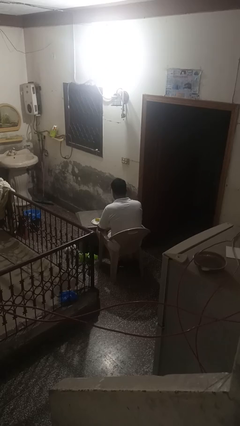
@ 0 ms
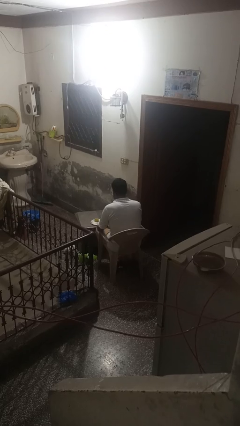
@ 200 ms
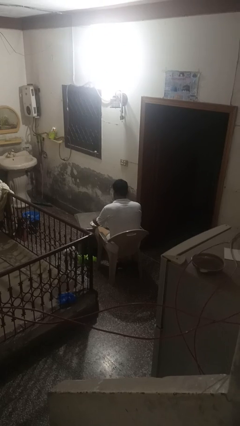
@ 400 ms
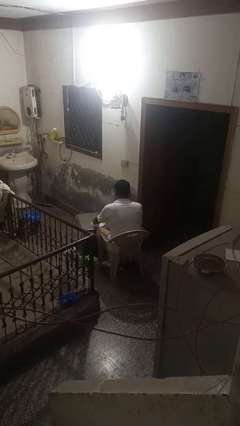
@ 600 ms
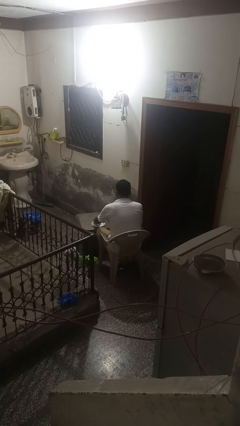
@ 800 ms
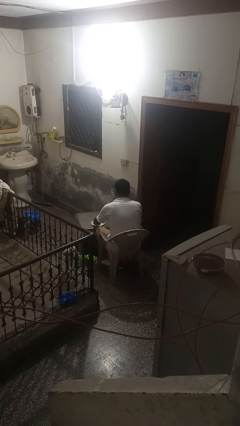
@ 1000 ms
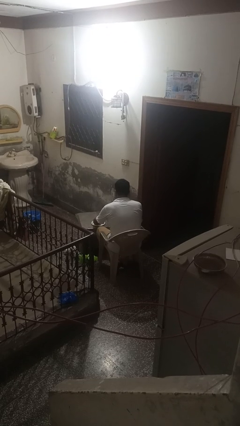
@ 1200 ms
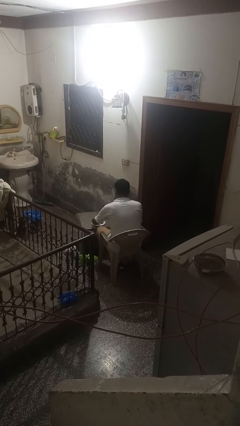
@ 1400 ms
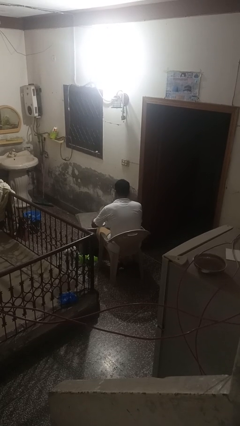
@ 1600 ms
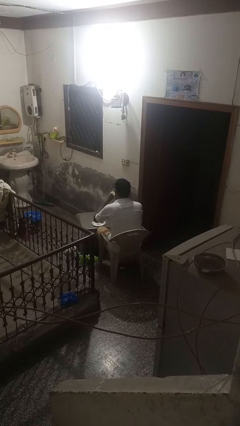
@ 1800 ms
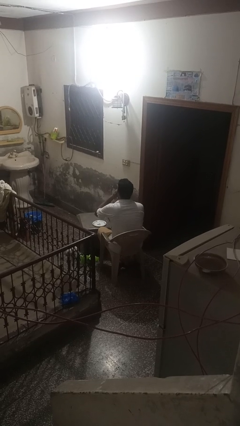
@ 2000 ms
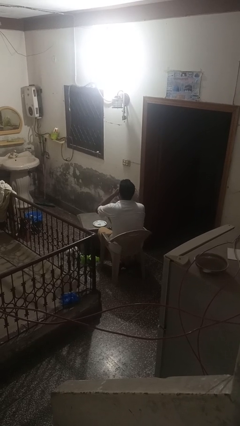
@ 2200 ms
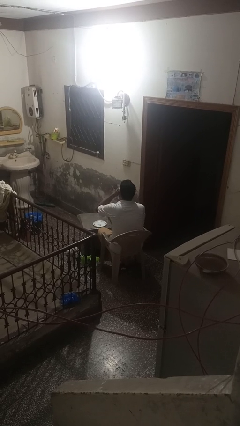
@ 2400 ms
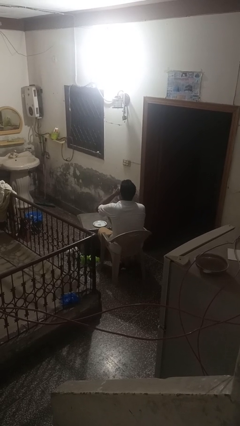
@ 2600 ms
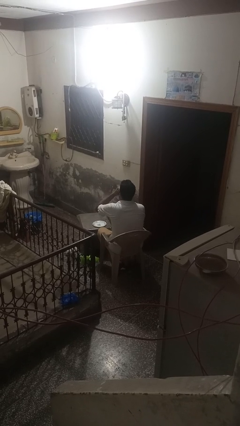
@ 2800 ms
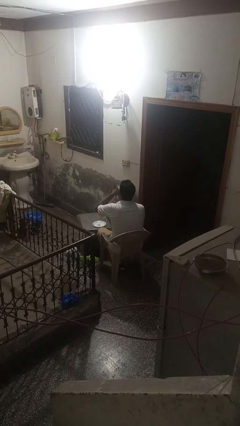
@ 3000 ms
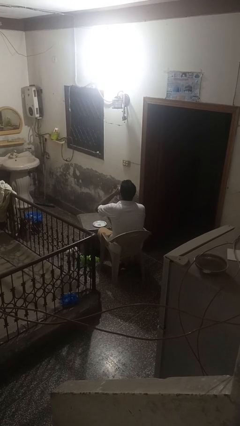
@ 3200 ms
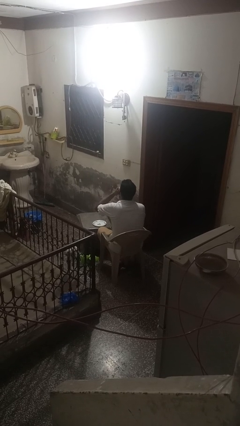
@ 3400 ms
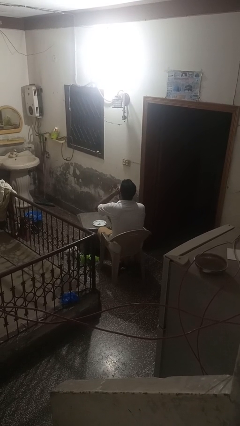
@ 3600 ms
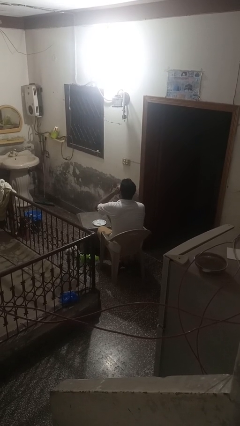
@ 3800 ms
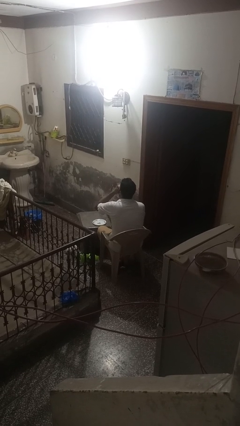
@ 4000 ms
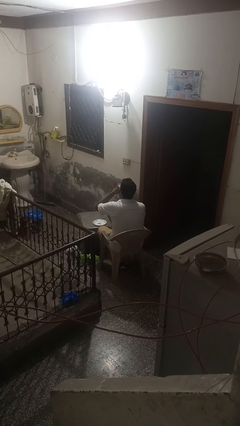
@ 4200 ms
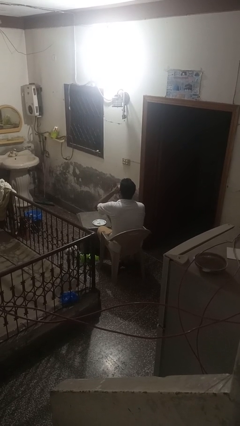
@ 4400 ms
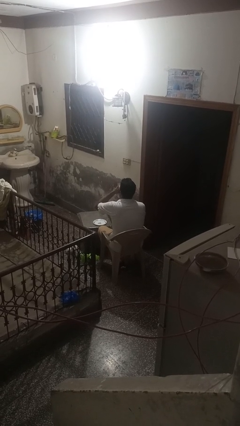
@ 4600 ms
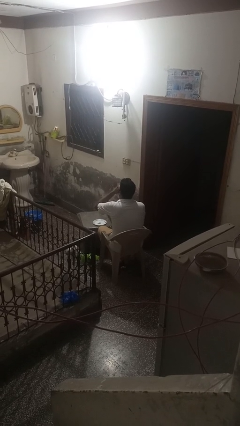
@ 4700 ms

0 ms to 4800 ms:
person eats with hands

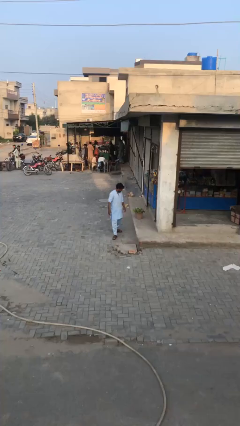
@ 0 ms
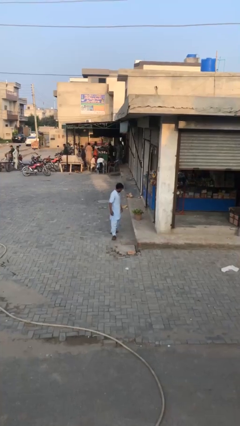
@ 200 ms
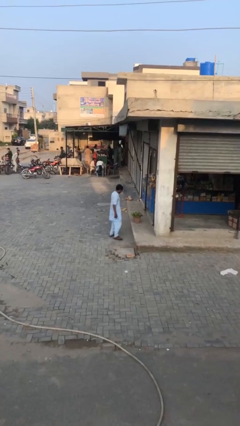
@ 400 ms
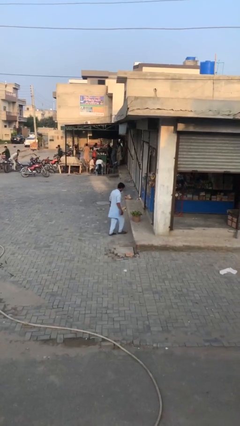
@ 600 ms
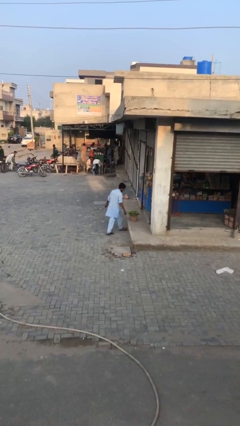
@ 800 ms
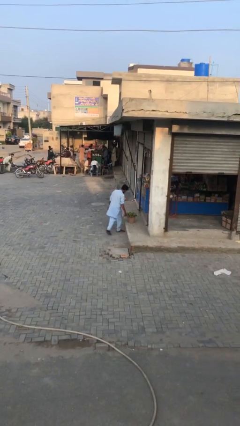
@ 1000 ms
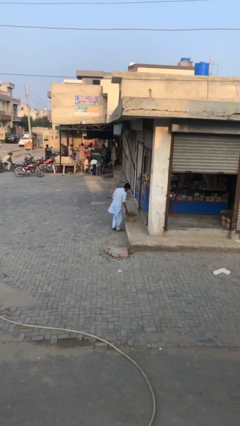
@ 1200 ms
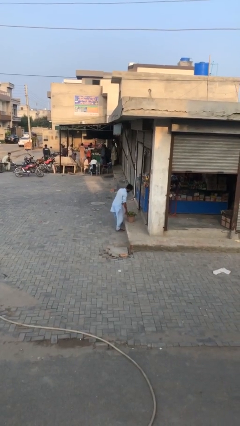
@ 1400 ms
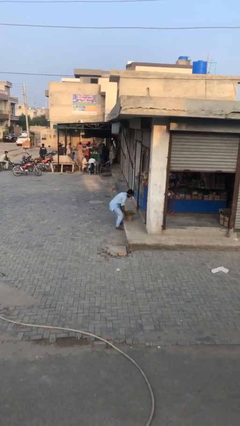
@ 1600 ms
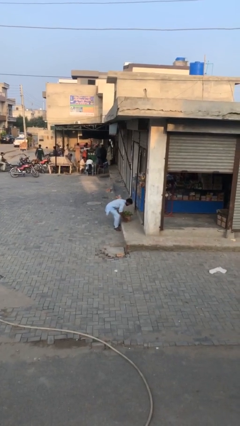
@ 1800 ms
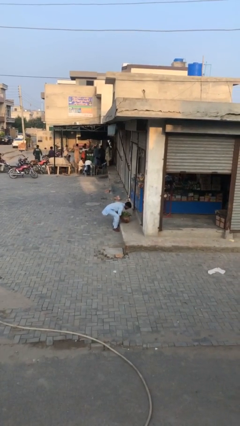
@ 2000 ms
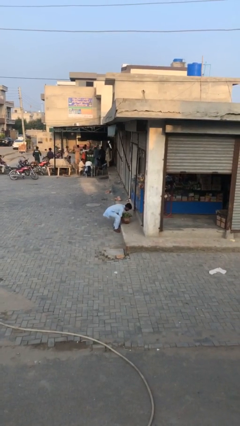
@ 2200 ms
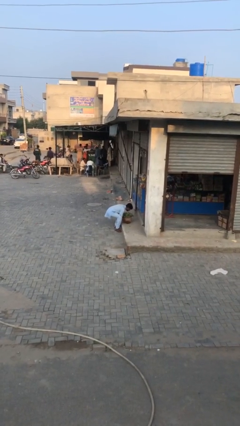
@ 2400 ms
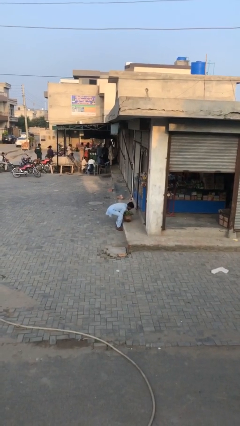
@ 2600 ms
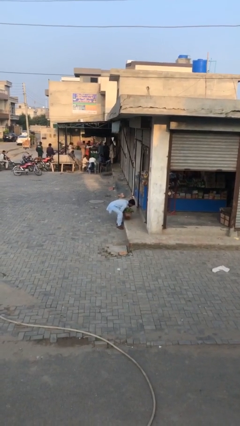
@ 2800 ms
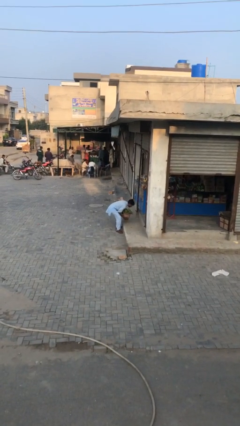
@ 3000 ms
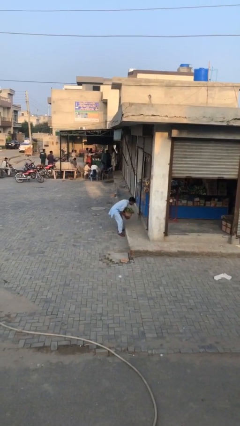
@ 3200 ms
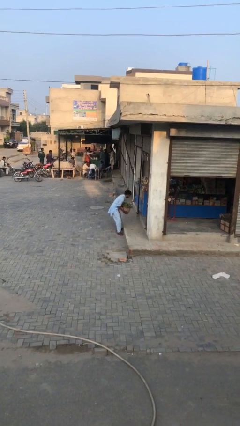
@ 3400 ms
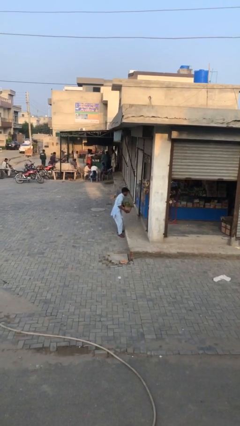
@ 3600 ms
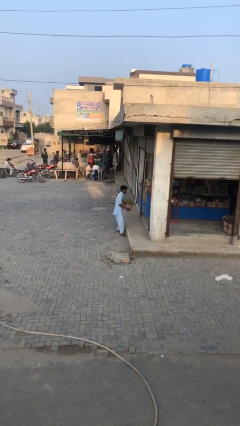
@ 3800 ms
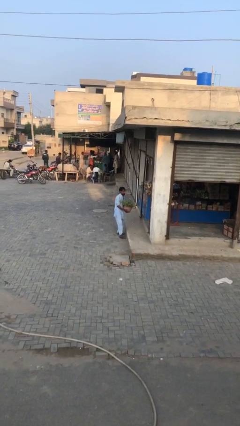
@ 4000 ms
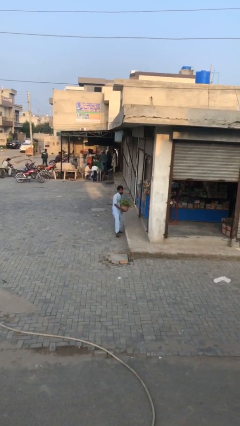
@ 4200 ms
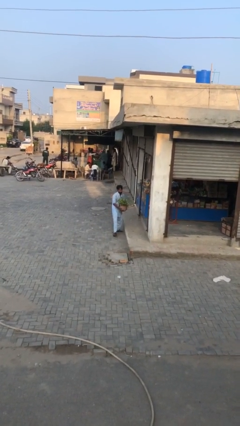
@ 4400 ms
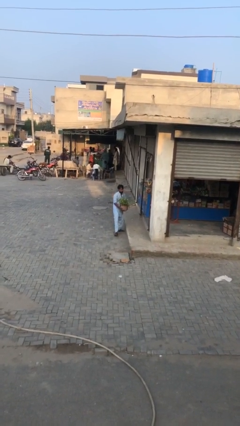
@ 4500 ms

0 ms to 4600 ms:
person picks up object from floor

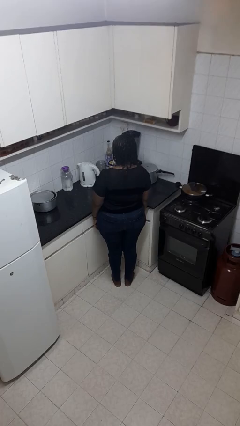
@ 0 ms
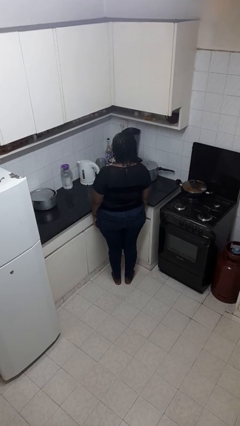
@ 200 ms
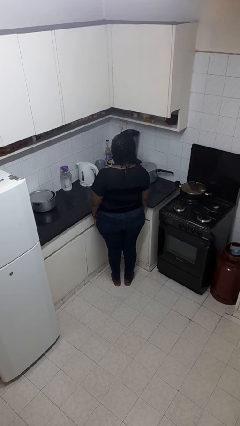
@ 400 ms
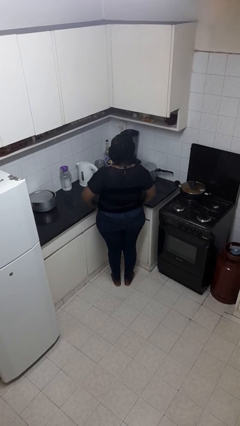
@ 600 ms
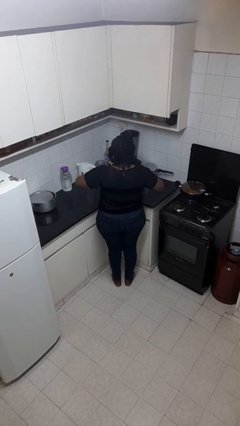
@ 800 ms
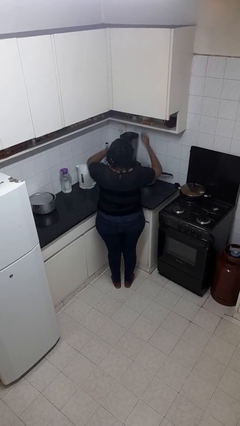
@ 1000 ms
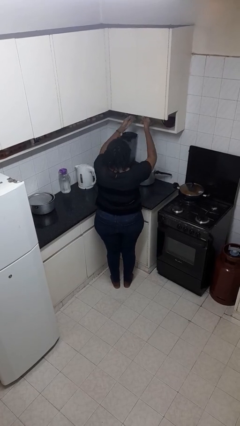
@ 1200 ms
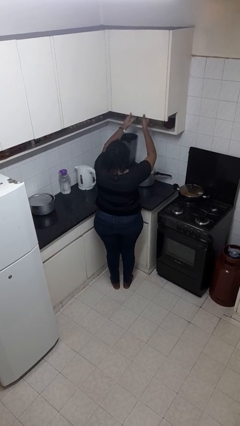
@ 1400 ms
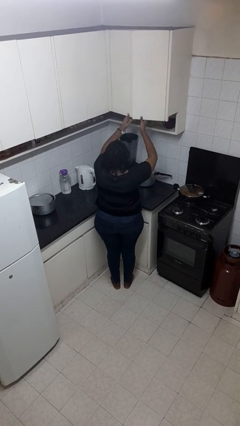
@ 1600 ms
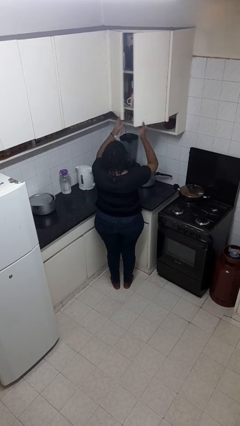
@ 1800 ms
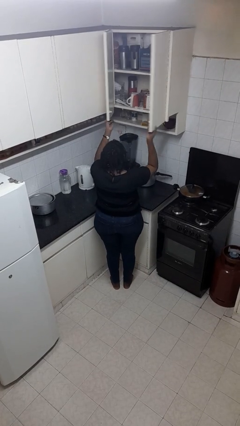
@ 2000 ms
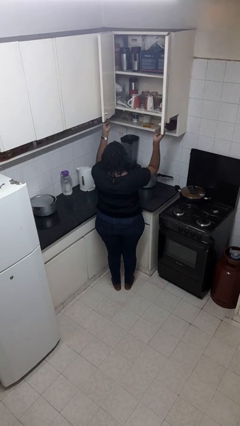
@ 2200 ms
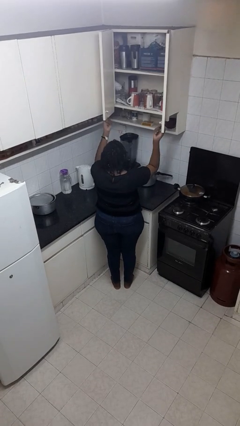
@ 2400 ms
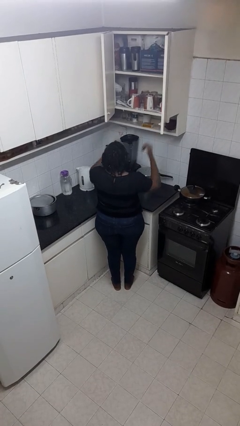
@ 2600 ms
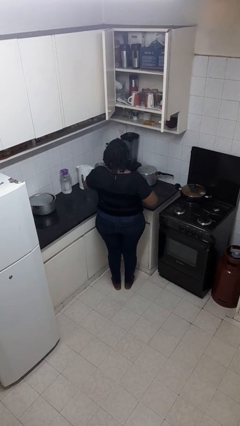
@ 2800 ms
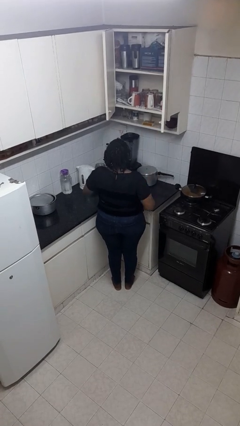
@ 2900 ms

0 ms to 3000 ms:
person opens cabinet

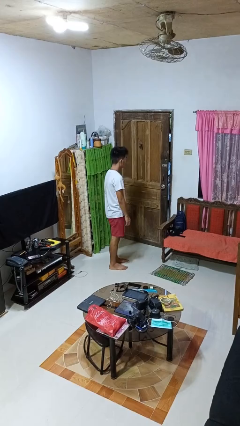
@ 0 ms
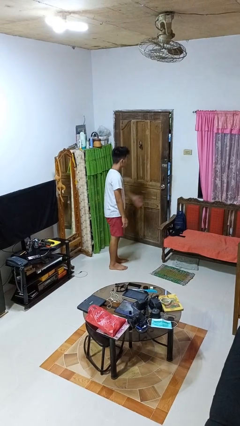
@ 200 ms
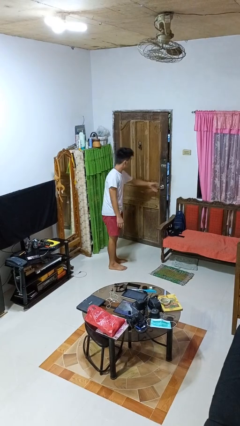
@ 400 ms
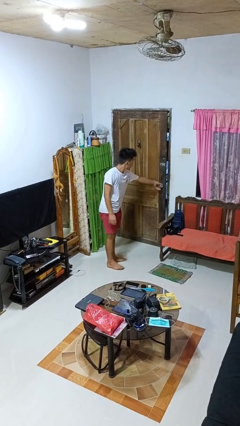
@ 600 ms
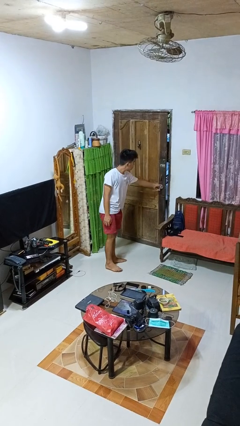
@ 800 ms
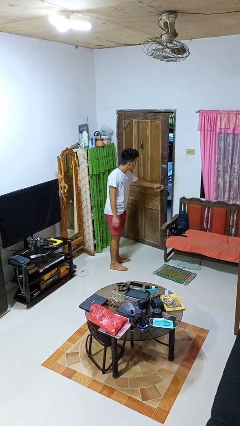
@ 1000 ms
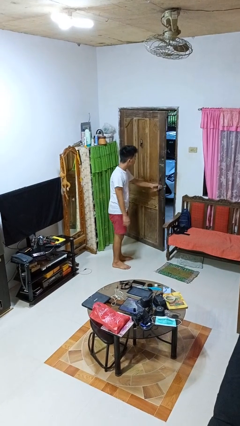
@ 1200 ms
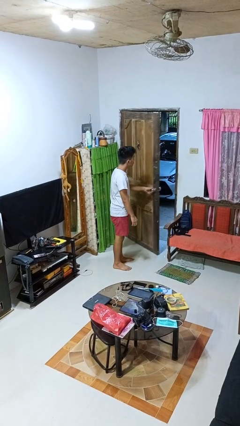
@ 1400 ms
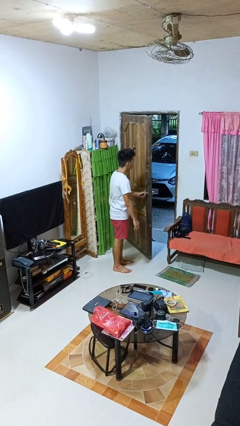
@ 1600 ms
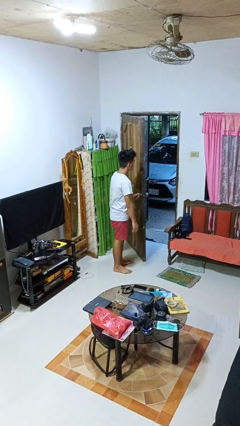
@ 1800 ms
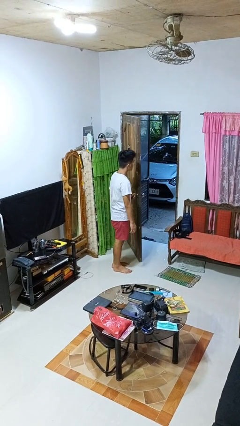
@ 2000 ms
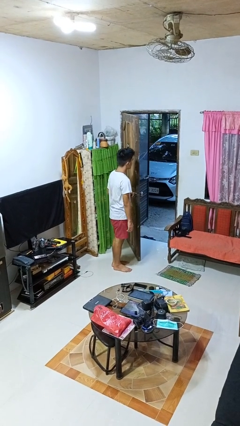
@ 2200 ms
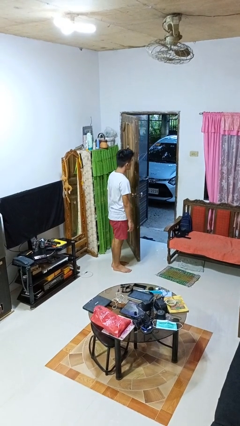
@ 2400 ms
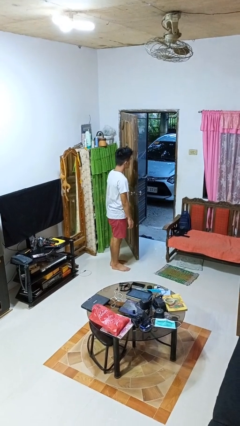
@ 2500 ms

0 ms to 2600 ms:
person opens facility door

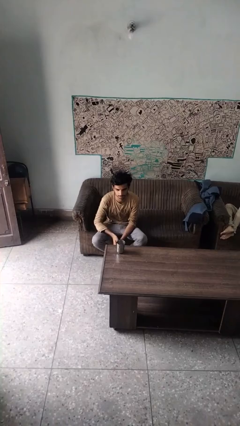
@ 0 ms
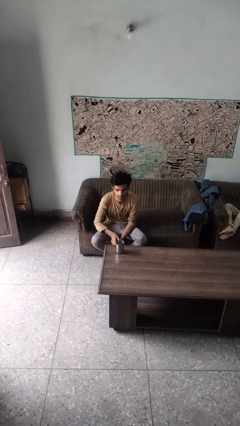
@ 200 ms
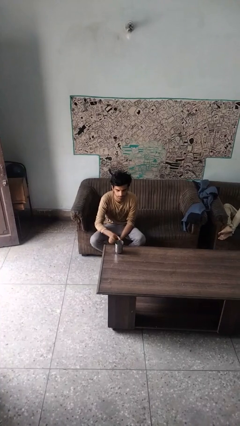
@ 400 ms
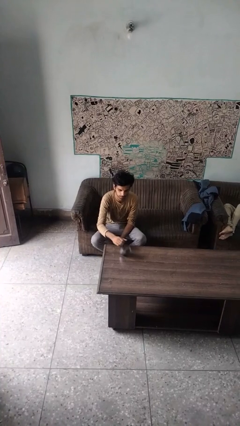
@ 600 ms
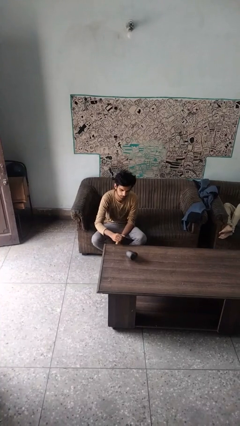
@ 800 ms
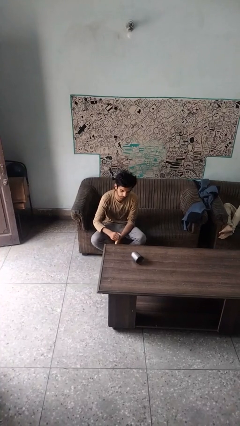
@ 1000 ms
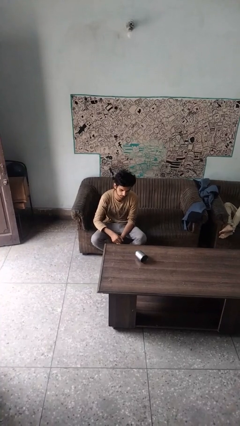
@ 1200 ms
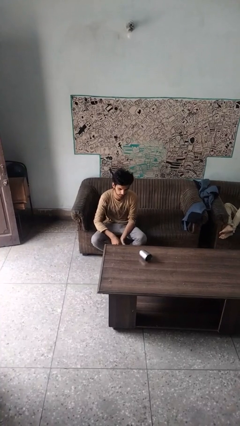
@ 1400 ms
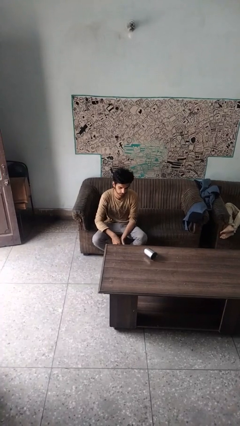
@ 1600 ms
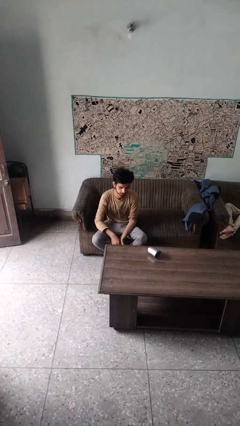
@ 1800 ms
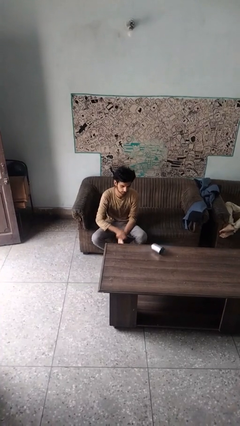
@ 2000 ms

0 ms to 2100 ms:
person knocks over glass

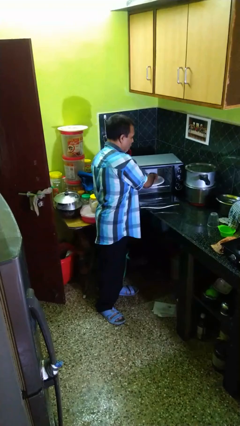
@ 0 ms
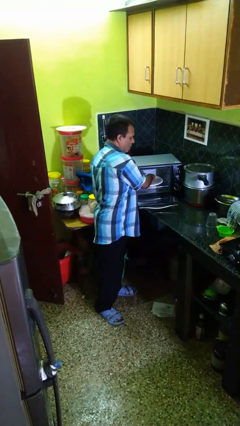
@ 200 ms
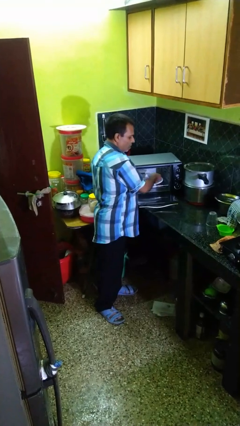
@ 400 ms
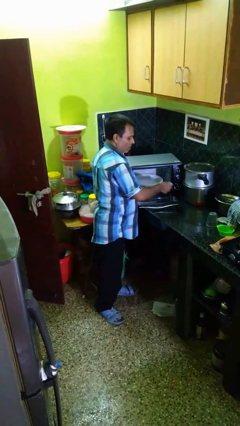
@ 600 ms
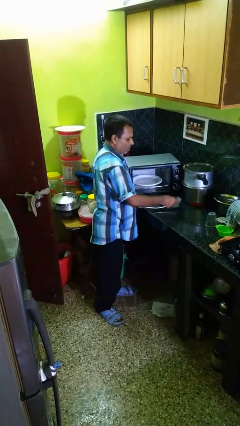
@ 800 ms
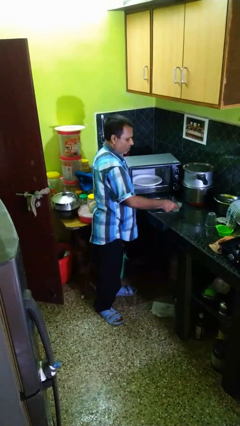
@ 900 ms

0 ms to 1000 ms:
person takes object from microwave
